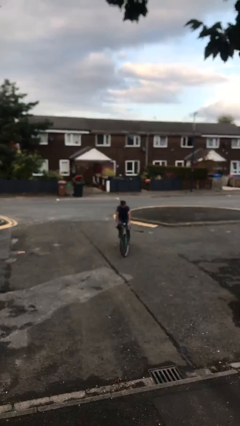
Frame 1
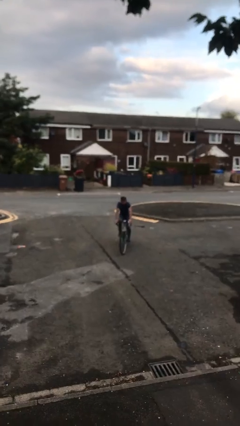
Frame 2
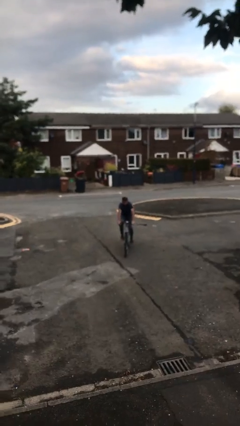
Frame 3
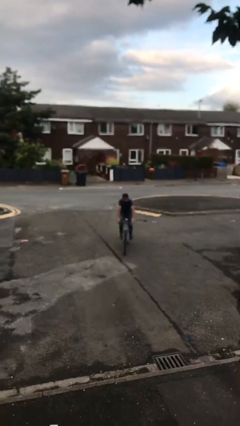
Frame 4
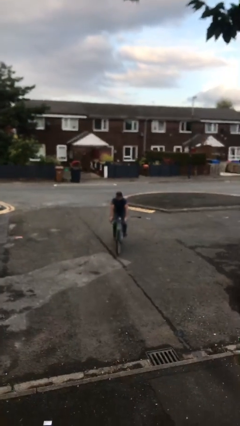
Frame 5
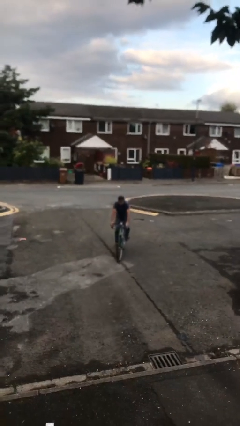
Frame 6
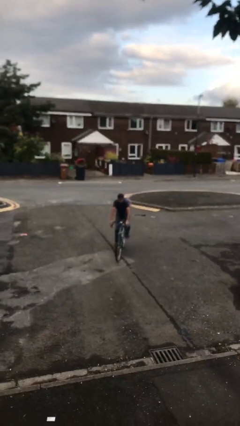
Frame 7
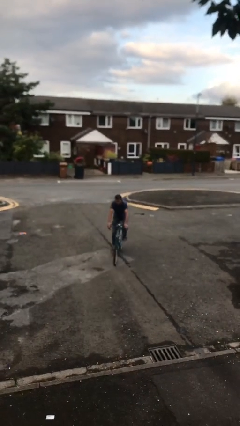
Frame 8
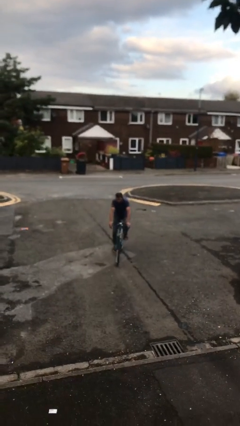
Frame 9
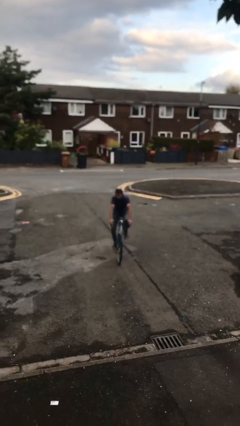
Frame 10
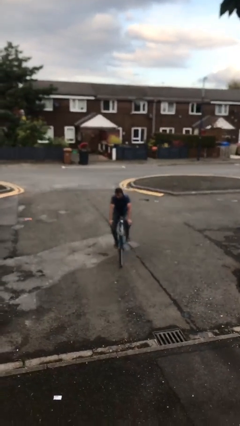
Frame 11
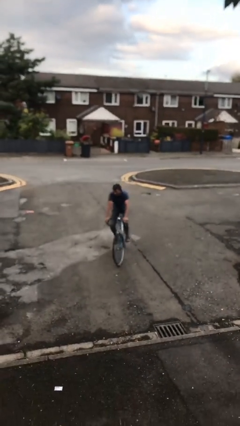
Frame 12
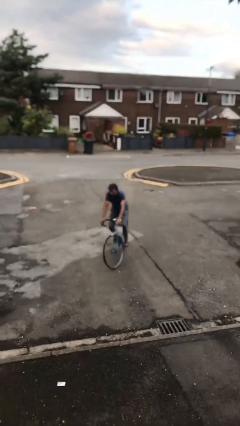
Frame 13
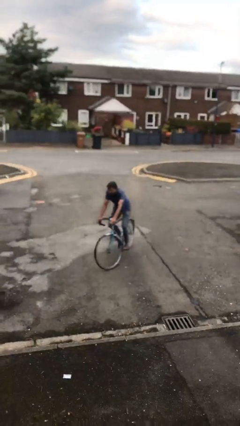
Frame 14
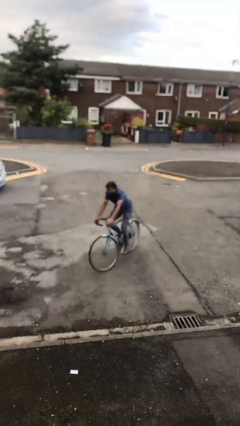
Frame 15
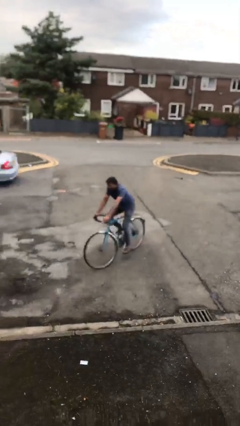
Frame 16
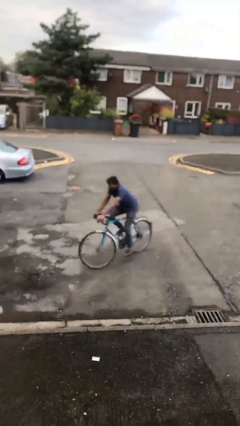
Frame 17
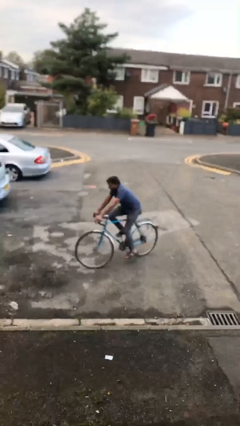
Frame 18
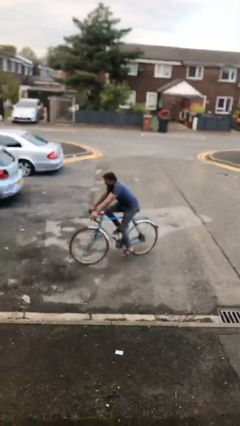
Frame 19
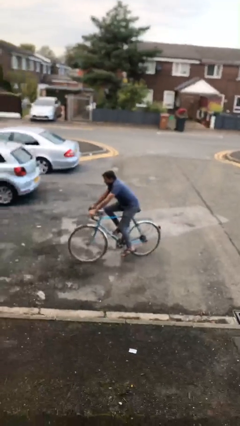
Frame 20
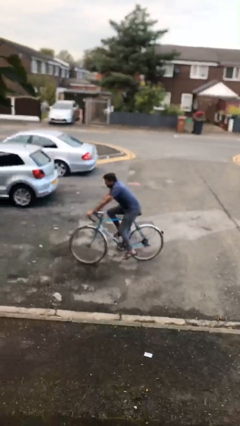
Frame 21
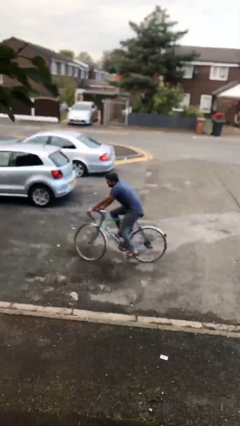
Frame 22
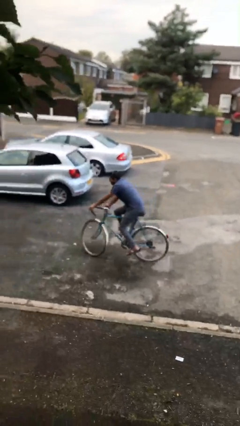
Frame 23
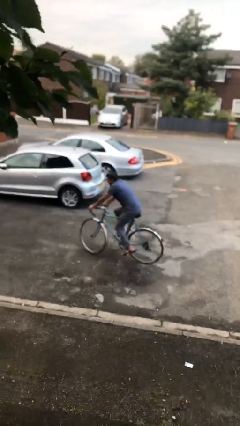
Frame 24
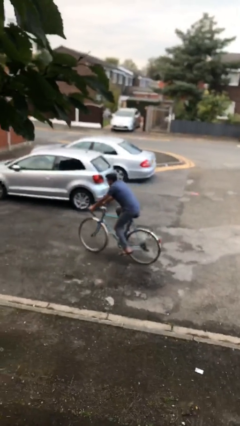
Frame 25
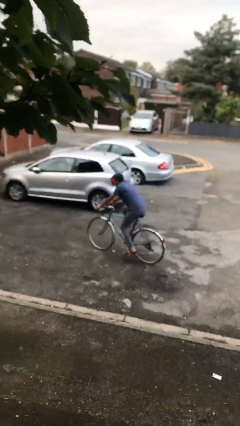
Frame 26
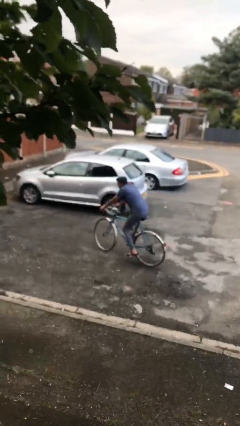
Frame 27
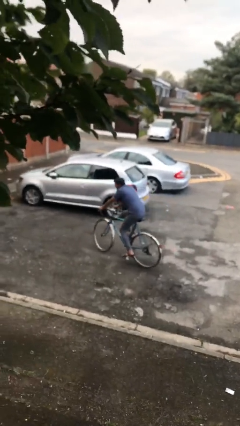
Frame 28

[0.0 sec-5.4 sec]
person rides bicycle

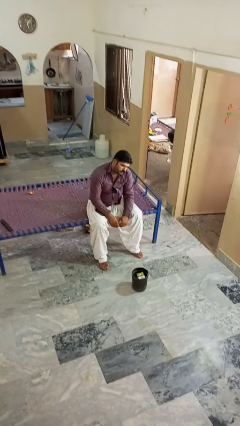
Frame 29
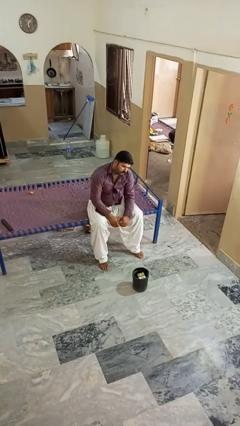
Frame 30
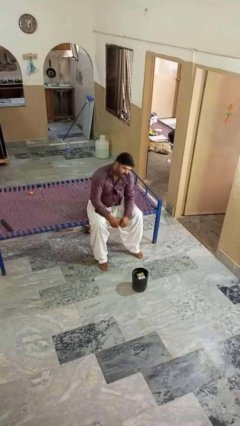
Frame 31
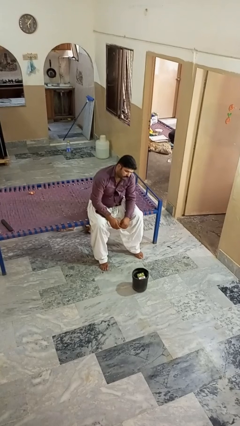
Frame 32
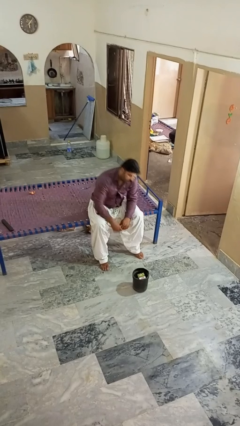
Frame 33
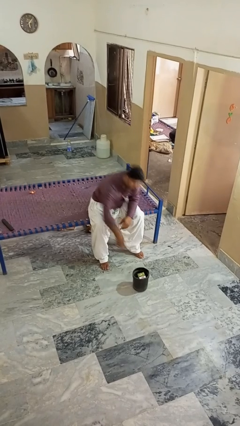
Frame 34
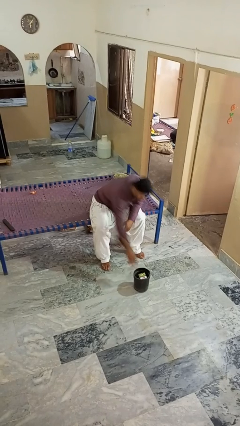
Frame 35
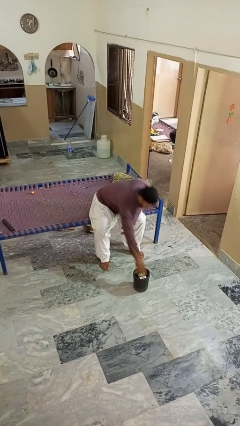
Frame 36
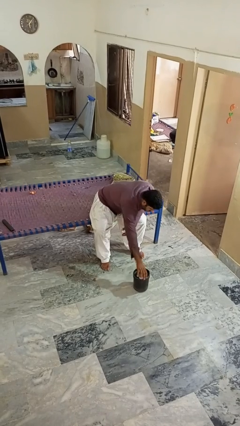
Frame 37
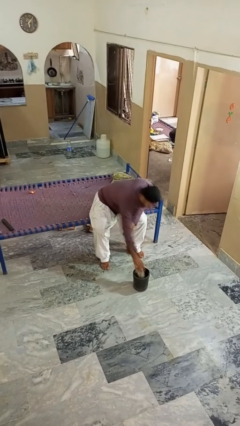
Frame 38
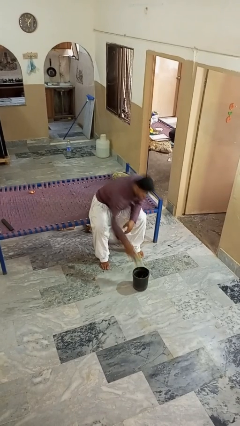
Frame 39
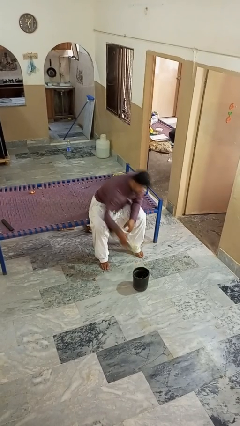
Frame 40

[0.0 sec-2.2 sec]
person takes object from basket

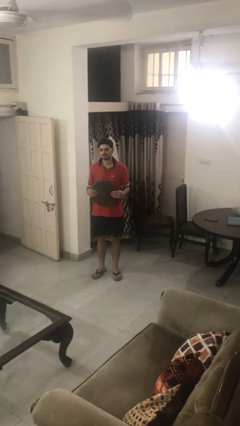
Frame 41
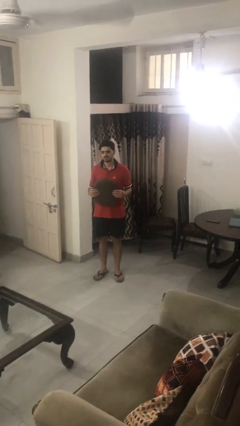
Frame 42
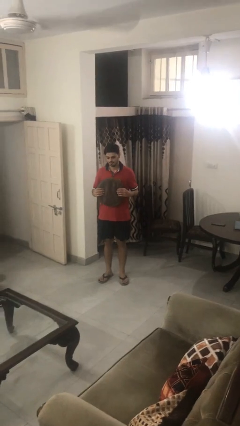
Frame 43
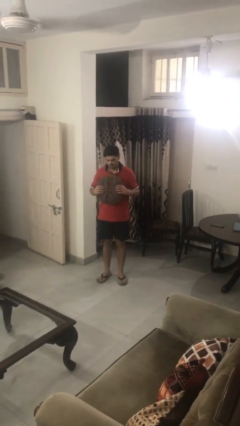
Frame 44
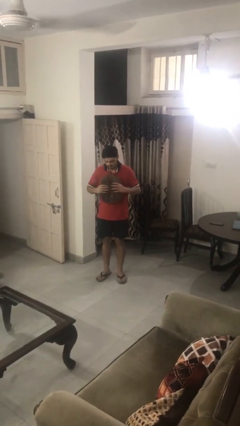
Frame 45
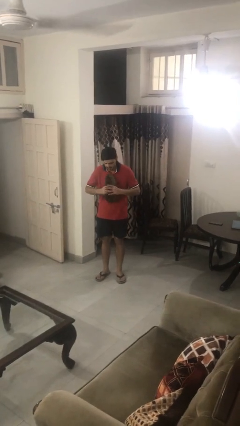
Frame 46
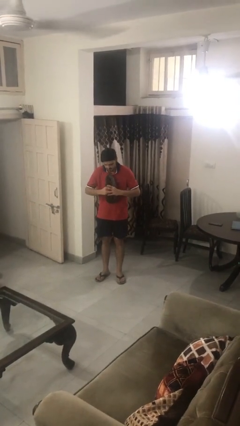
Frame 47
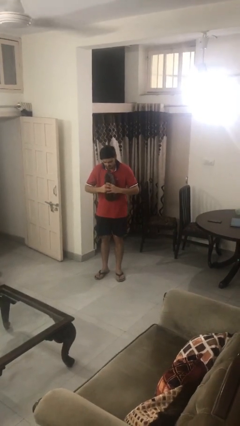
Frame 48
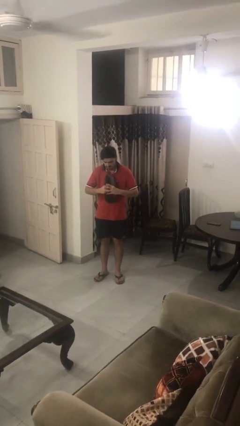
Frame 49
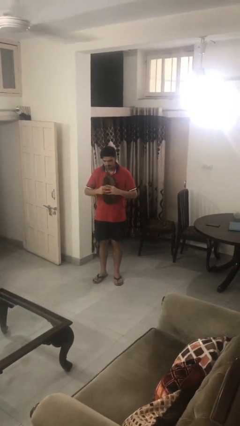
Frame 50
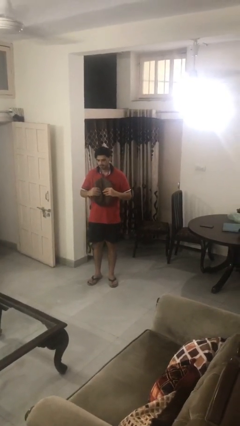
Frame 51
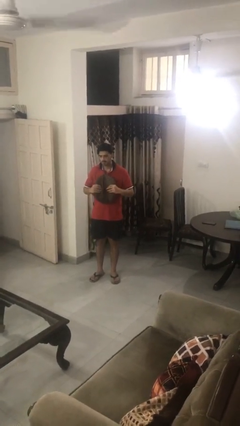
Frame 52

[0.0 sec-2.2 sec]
person squeezes object

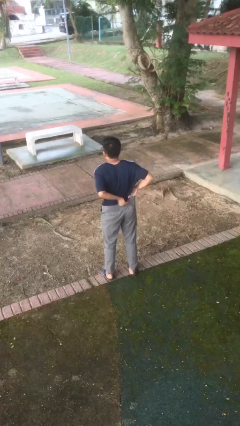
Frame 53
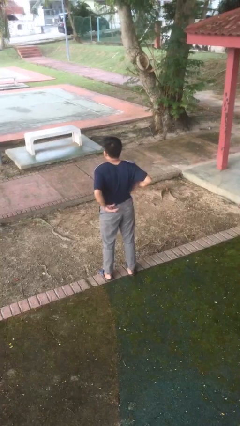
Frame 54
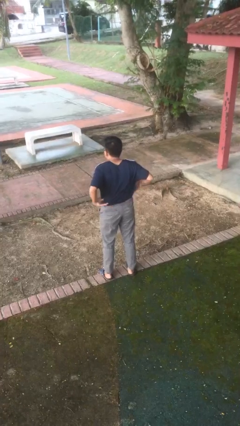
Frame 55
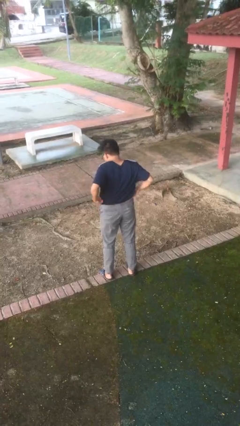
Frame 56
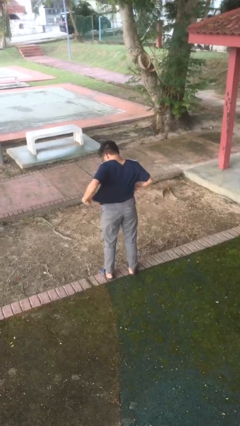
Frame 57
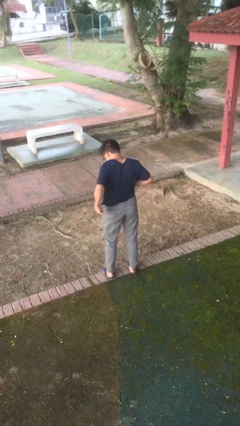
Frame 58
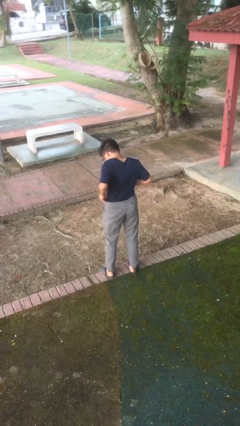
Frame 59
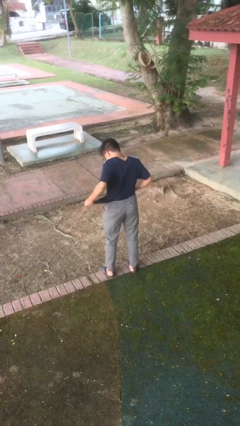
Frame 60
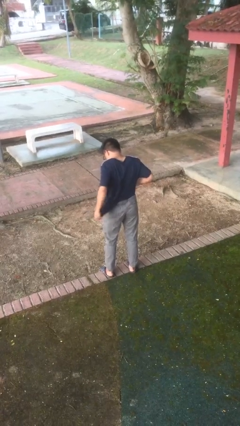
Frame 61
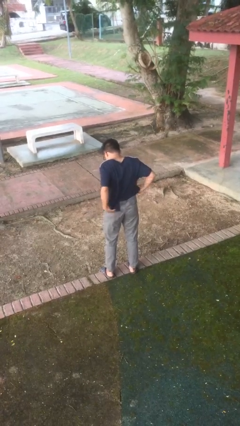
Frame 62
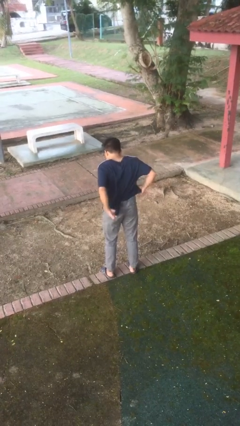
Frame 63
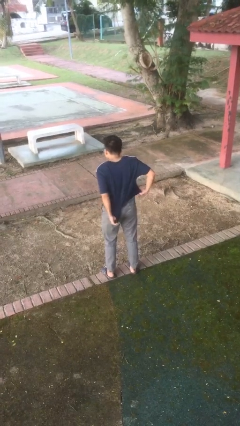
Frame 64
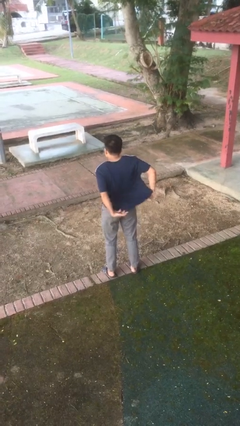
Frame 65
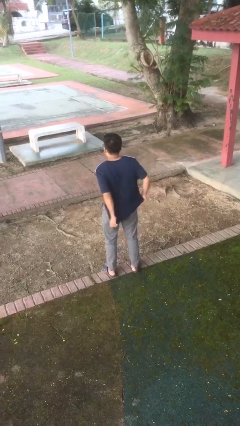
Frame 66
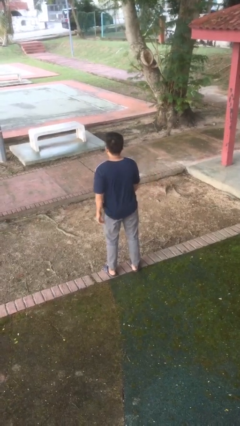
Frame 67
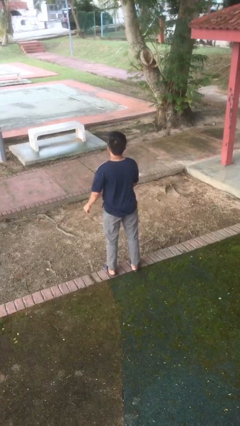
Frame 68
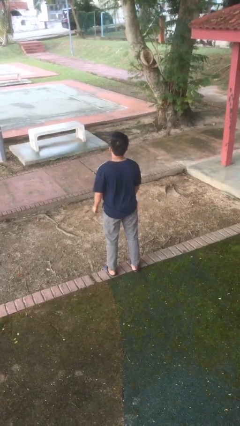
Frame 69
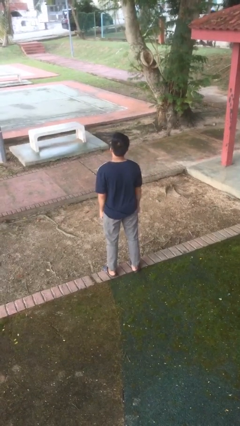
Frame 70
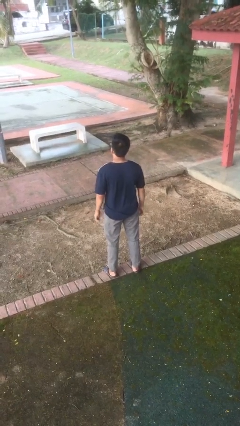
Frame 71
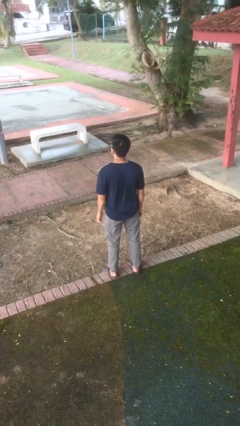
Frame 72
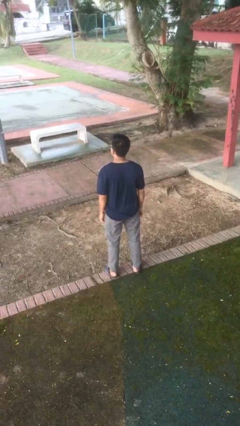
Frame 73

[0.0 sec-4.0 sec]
person untucks shirt

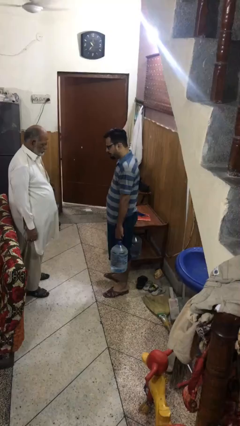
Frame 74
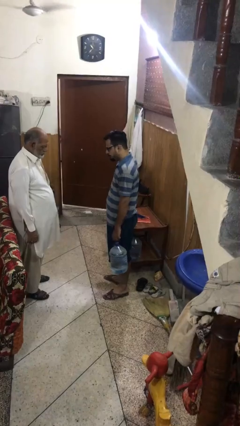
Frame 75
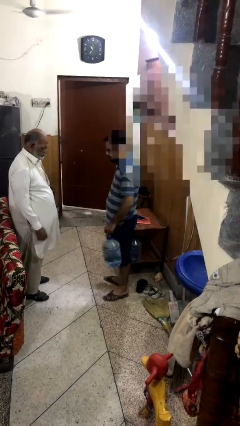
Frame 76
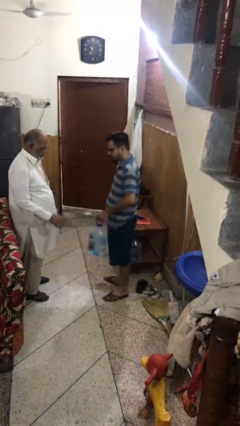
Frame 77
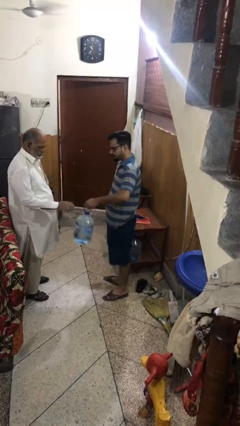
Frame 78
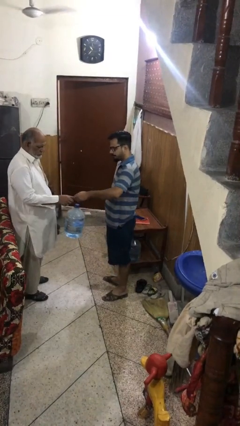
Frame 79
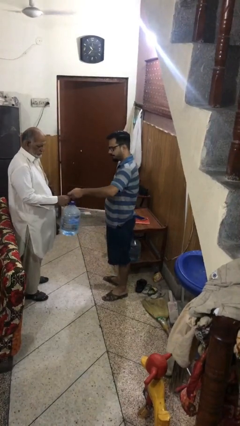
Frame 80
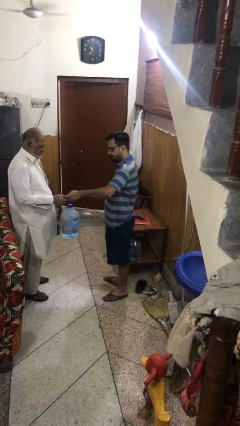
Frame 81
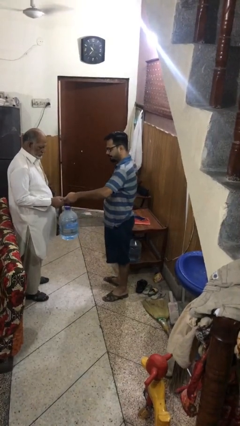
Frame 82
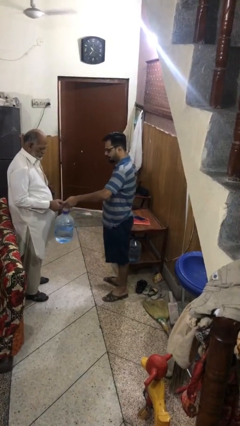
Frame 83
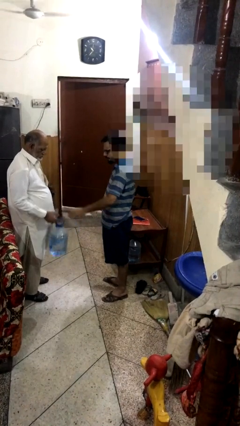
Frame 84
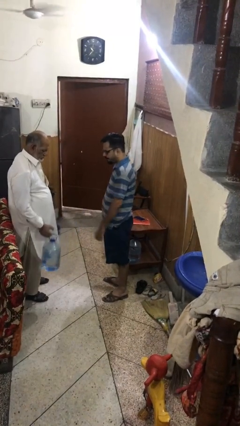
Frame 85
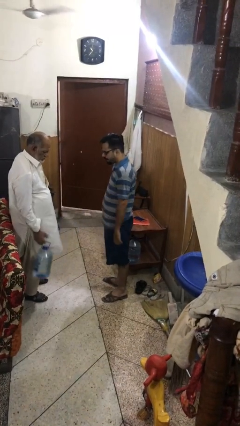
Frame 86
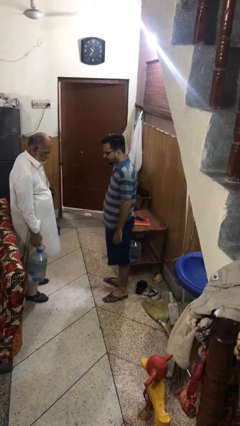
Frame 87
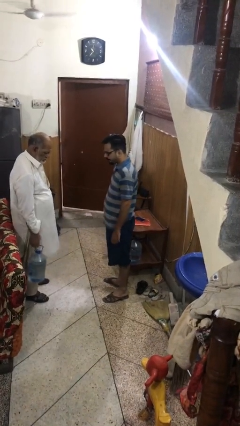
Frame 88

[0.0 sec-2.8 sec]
person transfers object to person

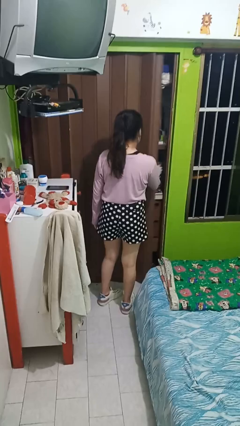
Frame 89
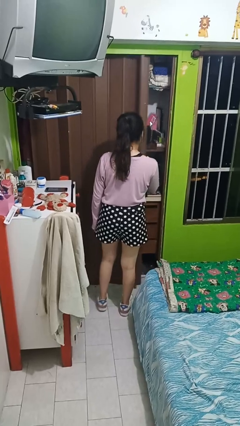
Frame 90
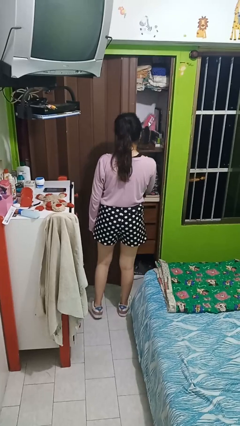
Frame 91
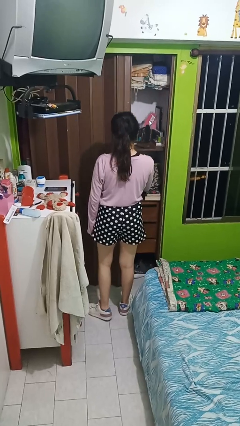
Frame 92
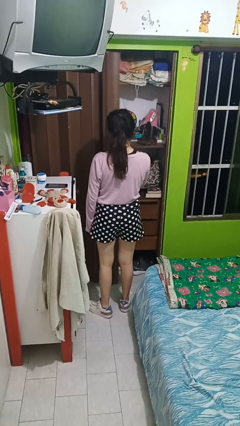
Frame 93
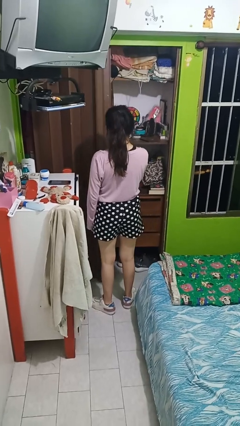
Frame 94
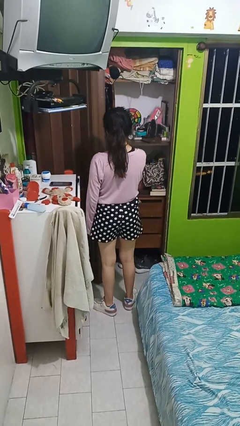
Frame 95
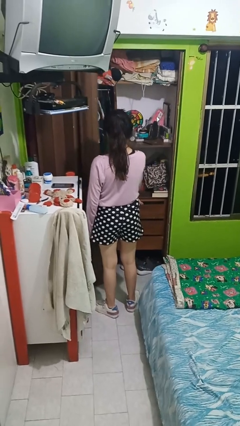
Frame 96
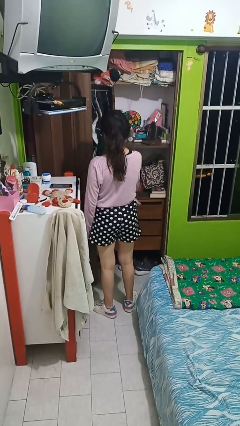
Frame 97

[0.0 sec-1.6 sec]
person opens sliding door
